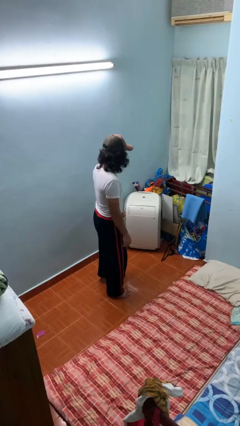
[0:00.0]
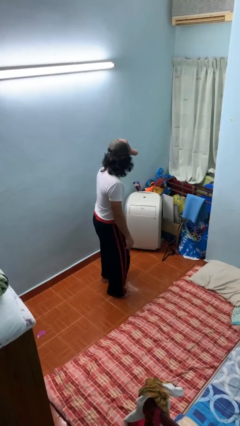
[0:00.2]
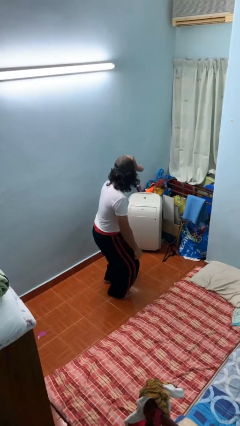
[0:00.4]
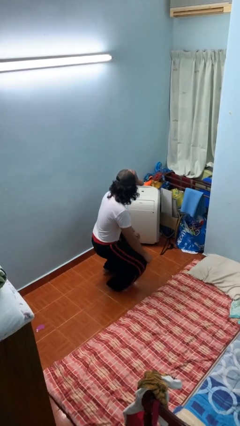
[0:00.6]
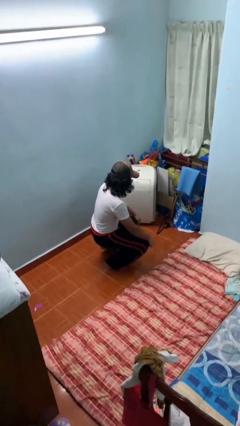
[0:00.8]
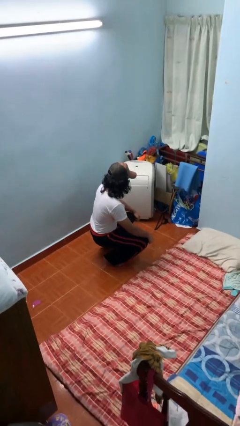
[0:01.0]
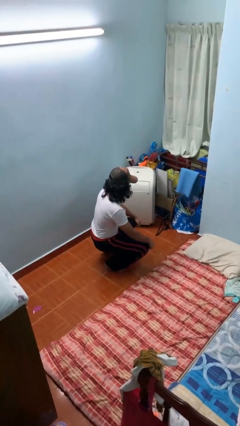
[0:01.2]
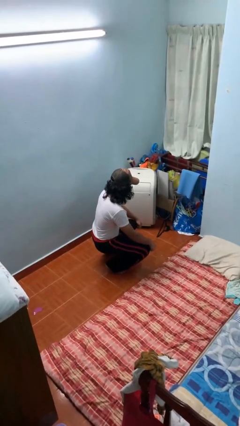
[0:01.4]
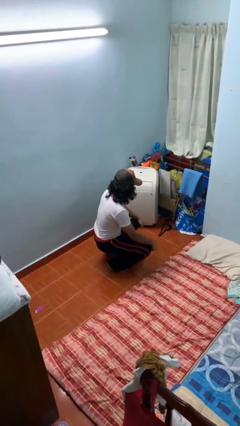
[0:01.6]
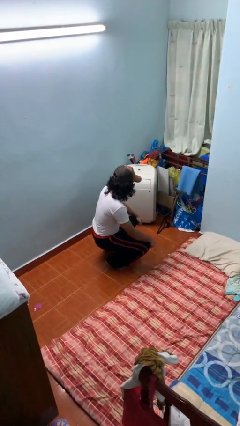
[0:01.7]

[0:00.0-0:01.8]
person squats

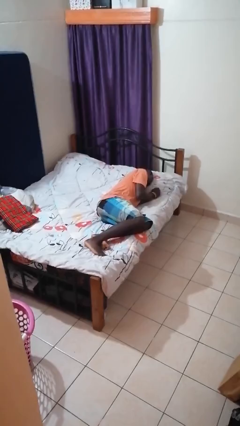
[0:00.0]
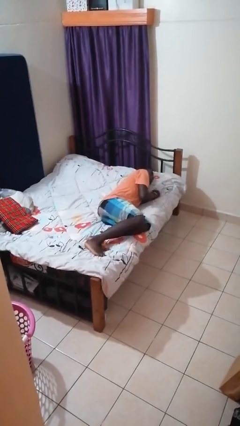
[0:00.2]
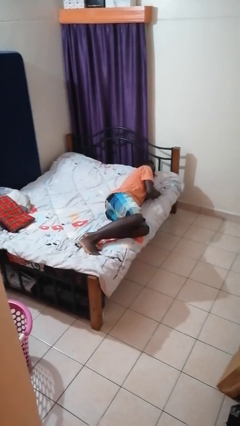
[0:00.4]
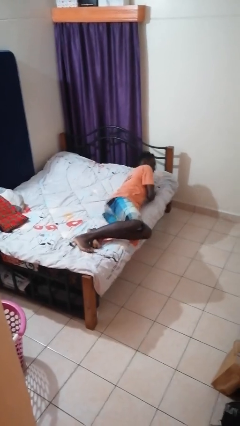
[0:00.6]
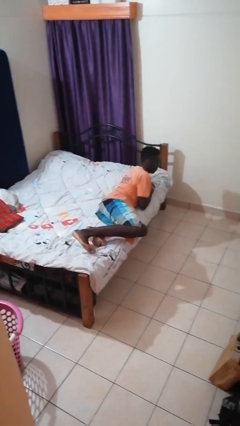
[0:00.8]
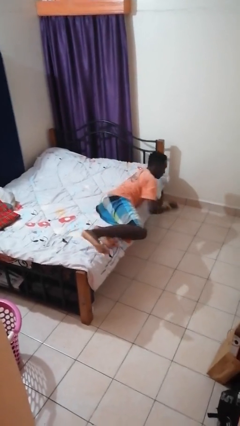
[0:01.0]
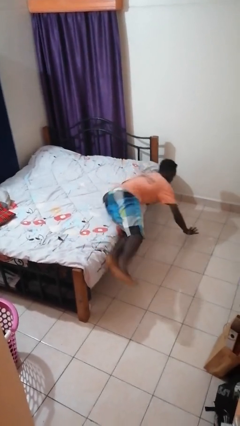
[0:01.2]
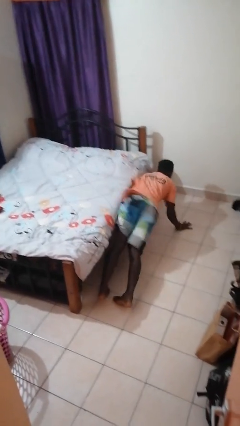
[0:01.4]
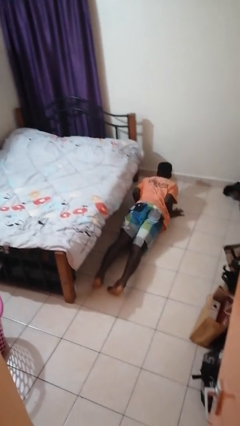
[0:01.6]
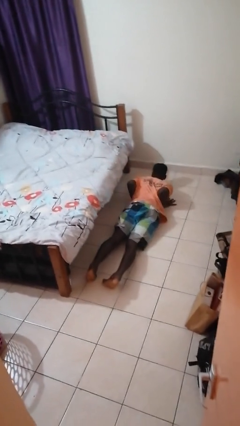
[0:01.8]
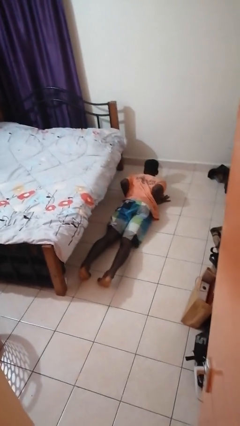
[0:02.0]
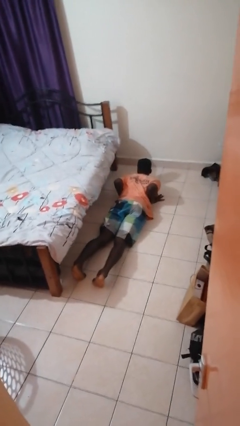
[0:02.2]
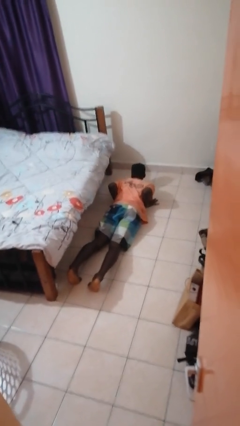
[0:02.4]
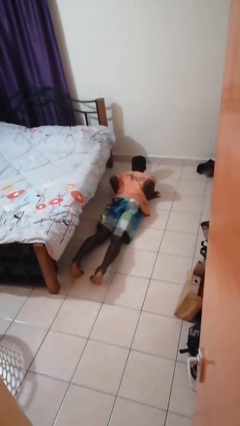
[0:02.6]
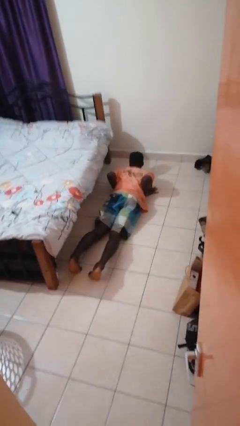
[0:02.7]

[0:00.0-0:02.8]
person falls from bed

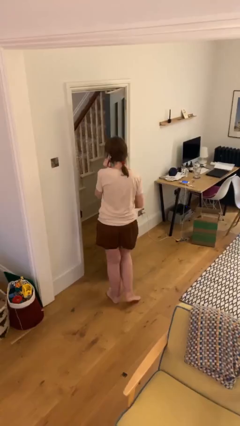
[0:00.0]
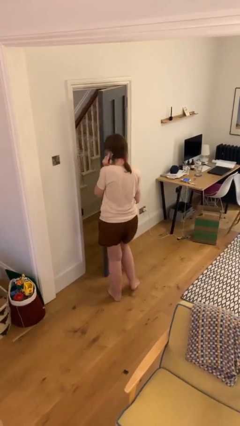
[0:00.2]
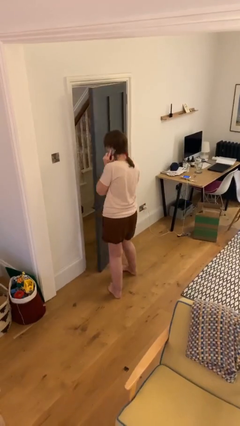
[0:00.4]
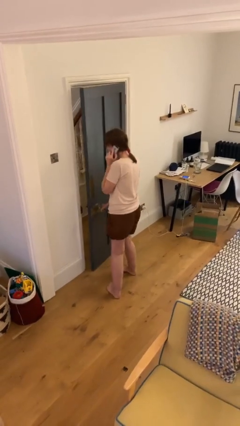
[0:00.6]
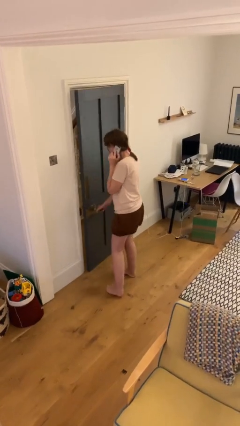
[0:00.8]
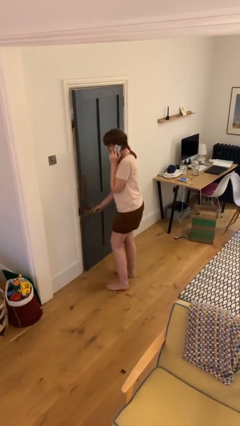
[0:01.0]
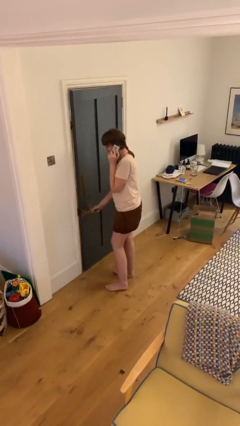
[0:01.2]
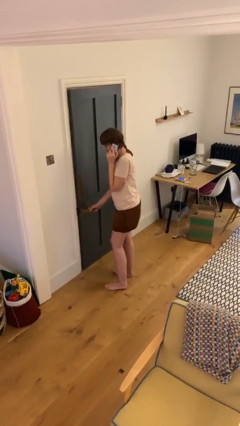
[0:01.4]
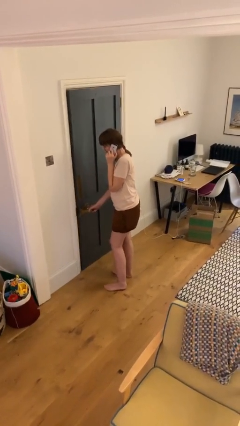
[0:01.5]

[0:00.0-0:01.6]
person closes facility door

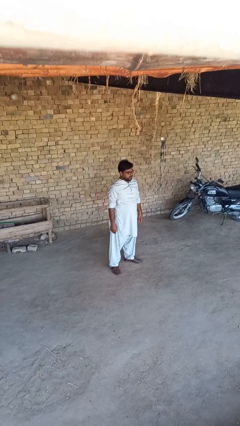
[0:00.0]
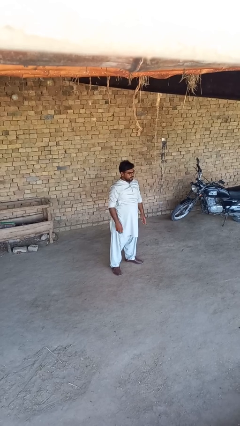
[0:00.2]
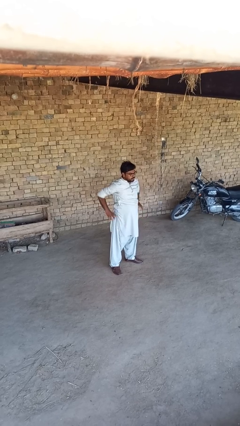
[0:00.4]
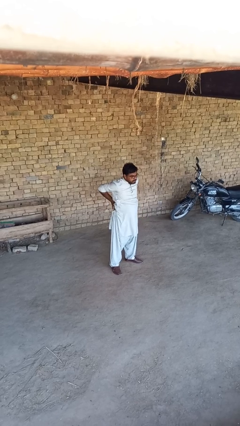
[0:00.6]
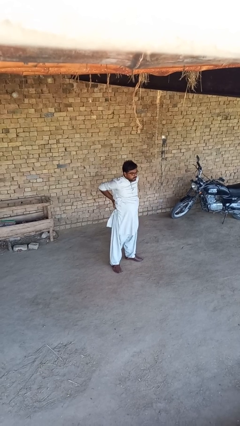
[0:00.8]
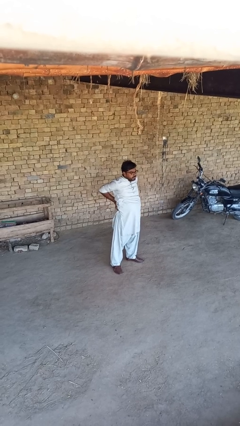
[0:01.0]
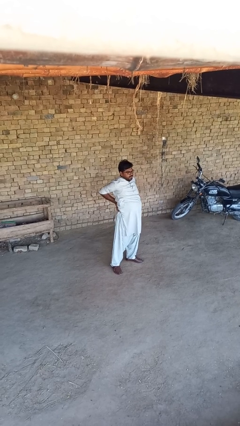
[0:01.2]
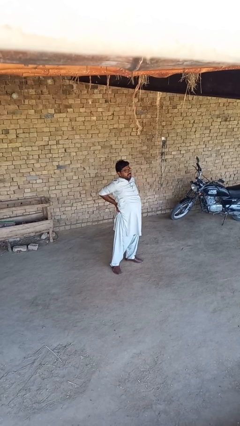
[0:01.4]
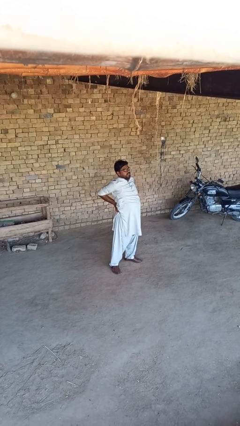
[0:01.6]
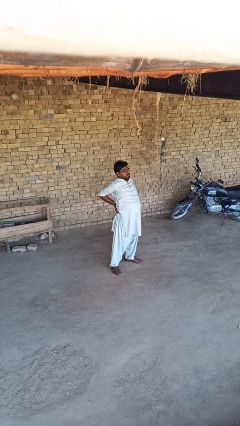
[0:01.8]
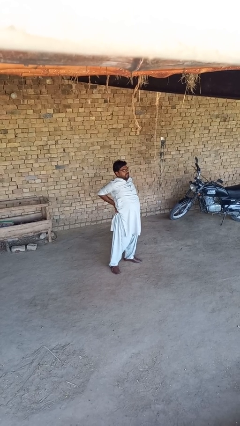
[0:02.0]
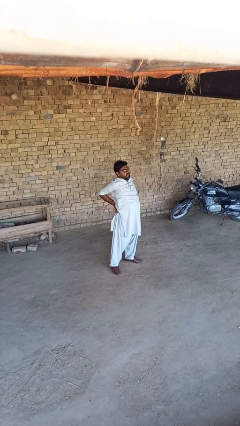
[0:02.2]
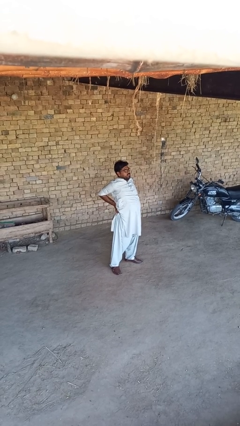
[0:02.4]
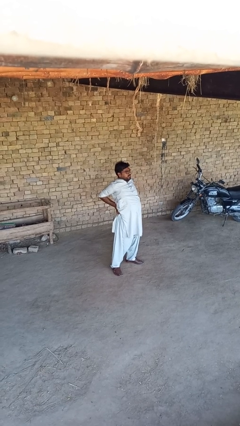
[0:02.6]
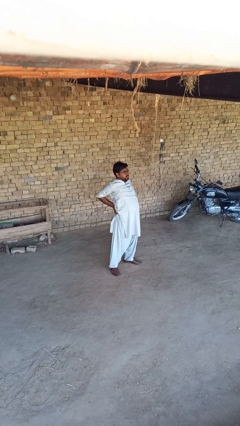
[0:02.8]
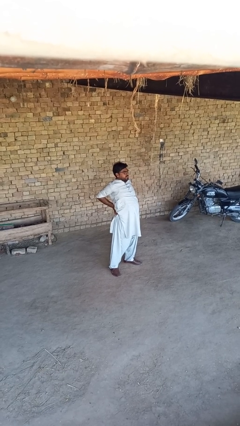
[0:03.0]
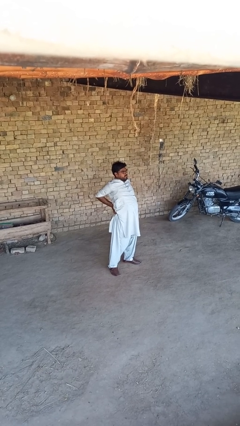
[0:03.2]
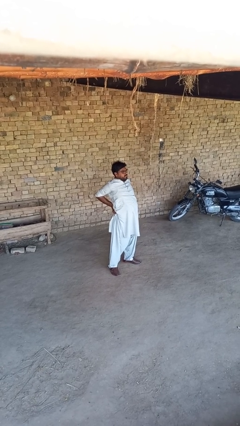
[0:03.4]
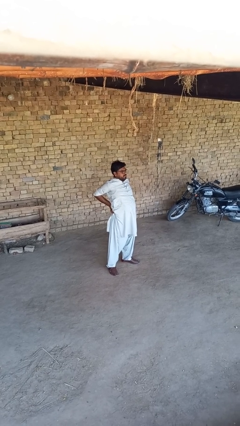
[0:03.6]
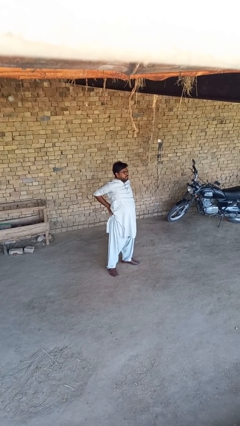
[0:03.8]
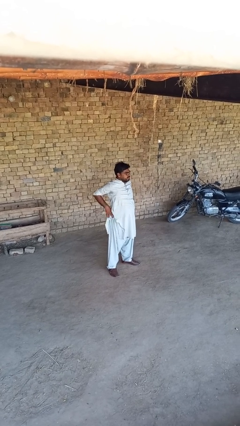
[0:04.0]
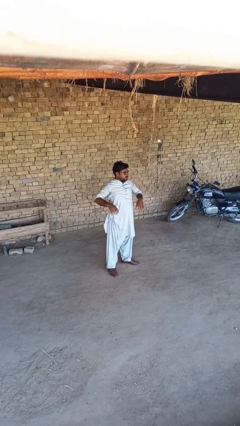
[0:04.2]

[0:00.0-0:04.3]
person stretches back

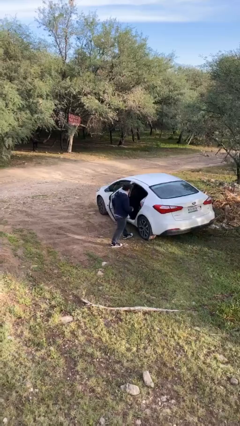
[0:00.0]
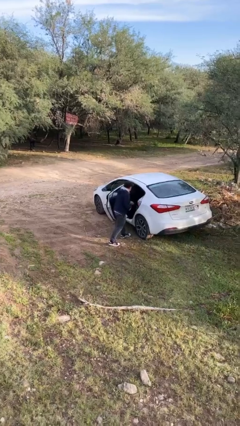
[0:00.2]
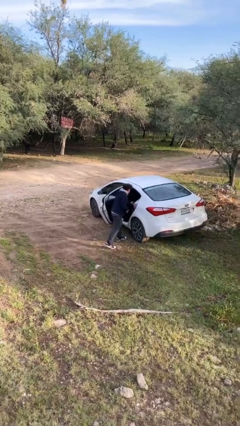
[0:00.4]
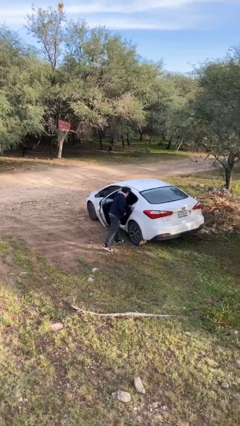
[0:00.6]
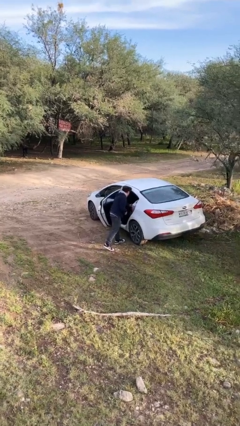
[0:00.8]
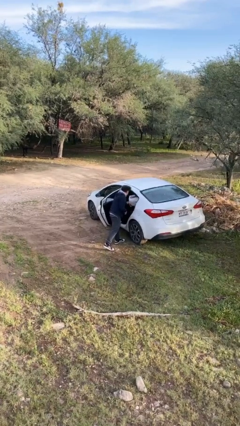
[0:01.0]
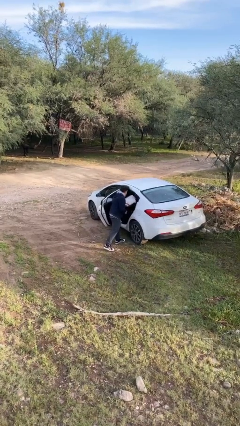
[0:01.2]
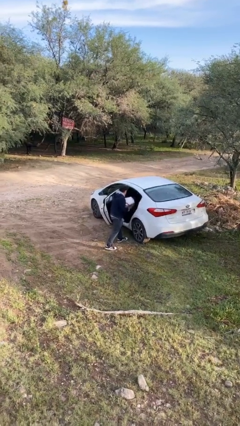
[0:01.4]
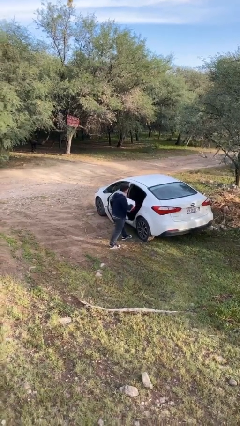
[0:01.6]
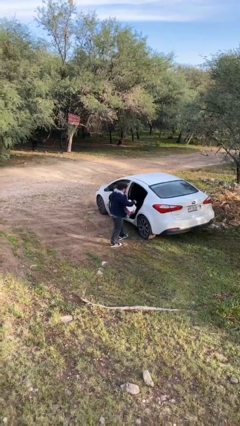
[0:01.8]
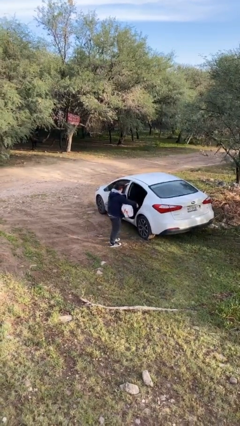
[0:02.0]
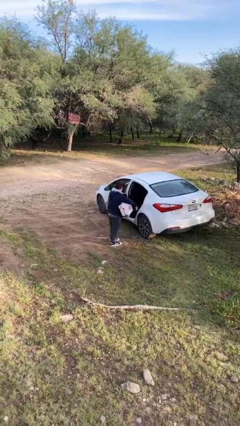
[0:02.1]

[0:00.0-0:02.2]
person unloads car

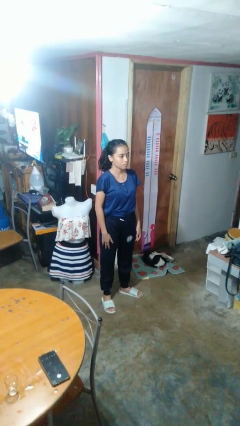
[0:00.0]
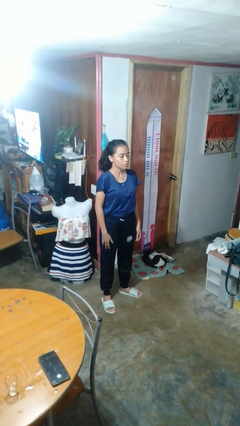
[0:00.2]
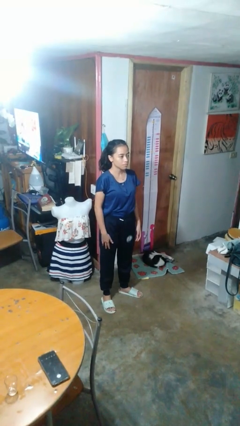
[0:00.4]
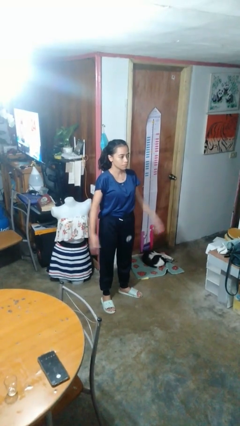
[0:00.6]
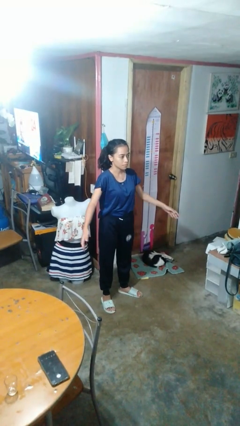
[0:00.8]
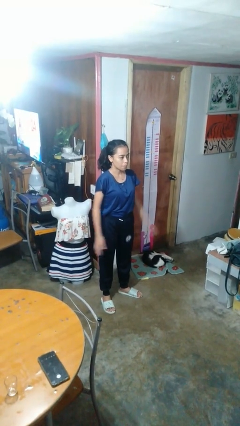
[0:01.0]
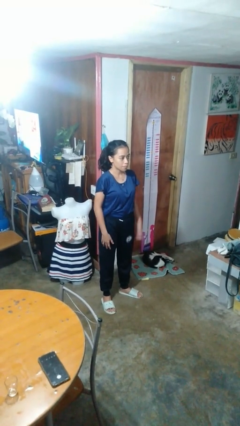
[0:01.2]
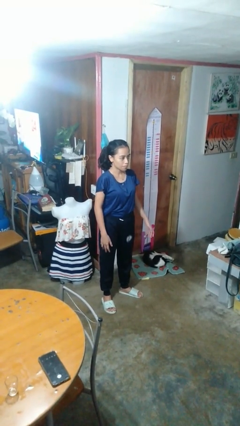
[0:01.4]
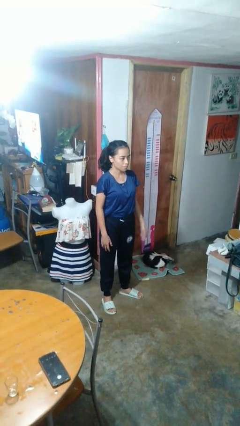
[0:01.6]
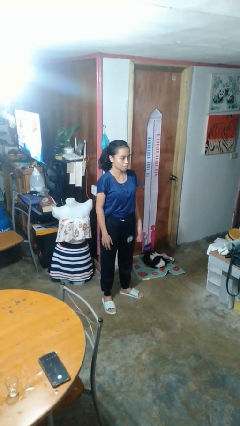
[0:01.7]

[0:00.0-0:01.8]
person slaps hands on thighs

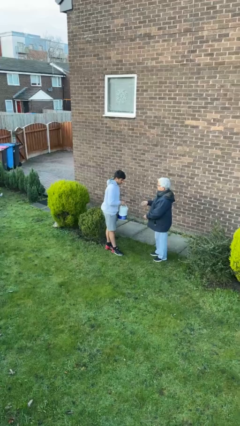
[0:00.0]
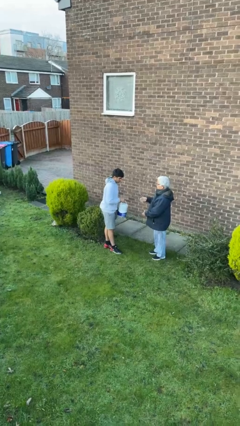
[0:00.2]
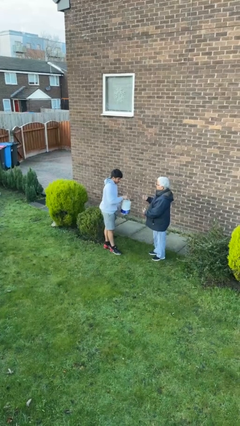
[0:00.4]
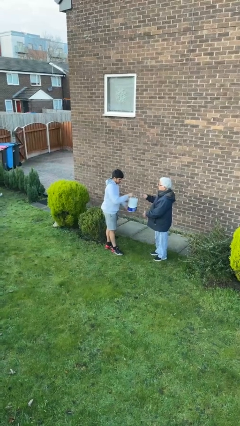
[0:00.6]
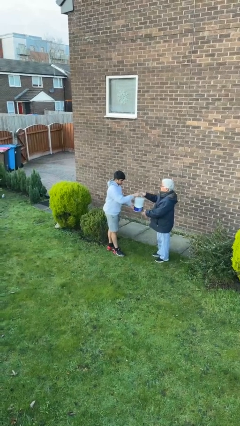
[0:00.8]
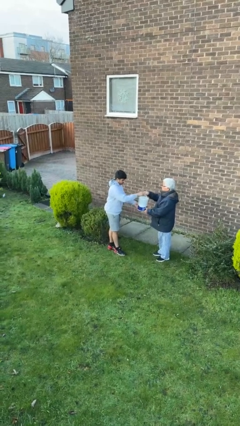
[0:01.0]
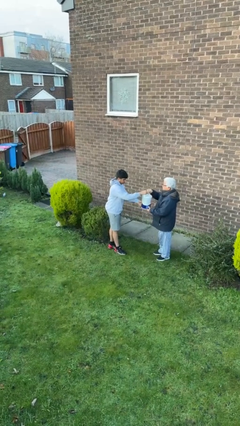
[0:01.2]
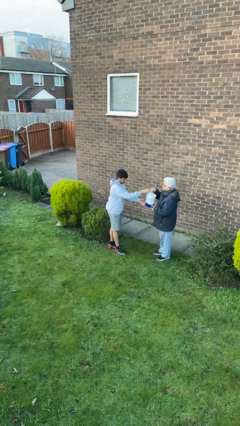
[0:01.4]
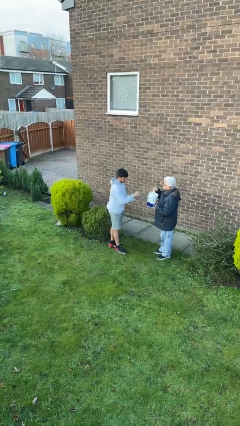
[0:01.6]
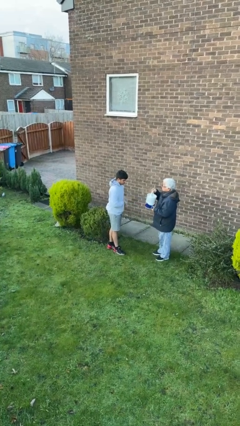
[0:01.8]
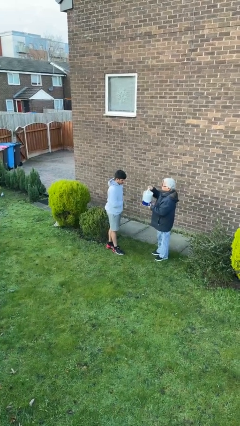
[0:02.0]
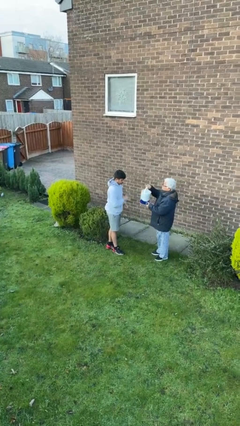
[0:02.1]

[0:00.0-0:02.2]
person transfers object to person

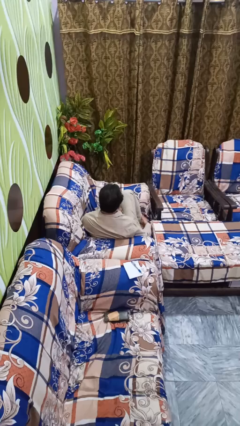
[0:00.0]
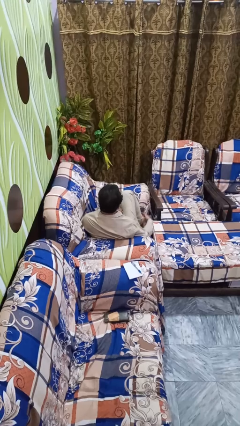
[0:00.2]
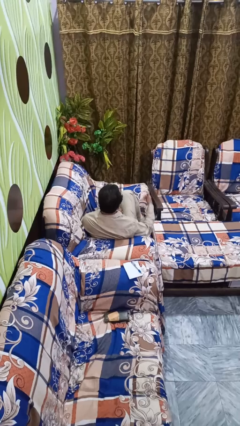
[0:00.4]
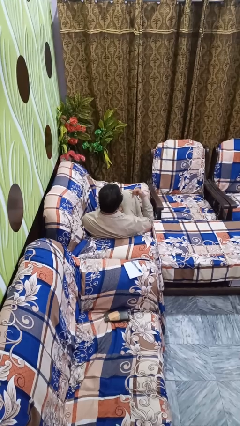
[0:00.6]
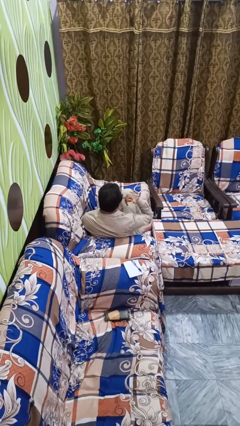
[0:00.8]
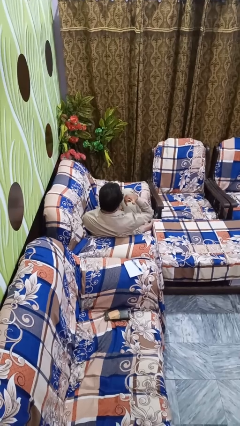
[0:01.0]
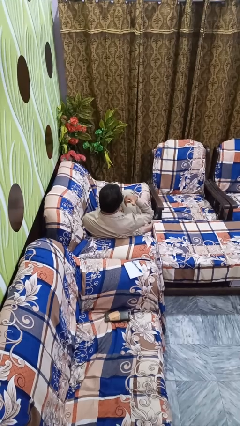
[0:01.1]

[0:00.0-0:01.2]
person gestures call me
